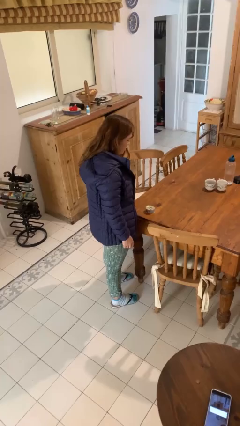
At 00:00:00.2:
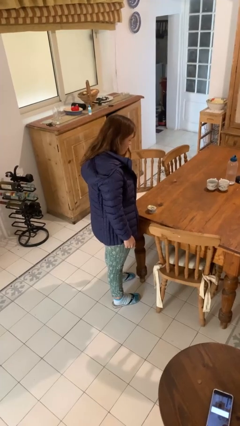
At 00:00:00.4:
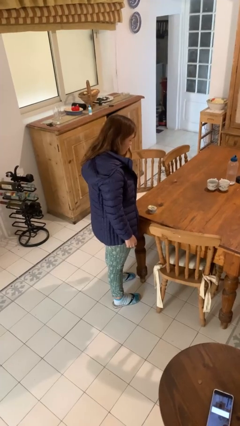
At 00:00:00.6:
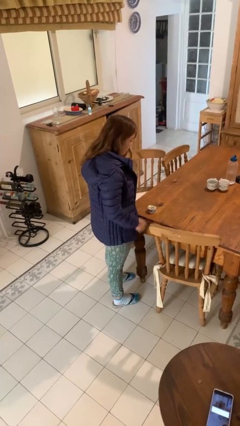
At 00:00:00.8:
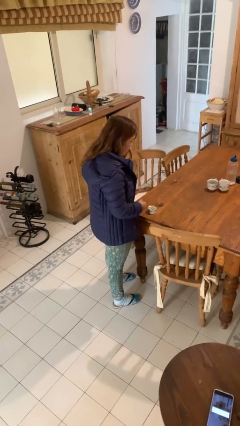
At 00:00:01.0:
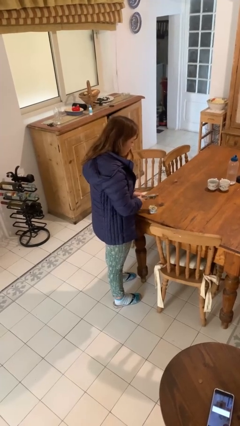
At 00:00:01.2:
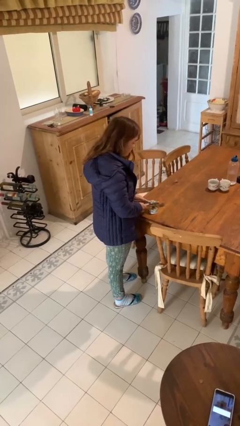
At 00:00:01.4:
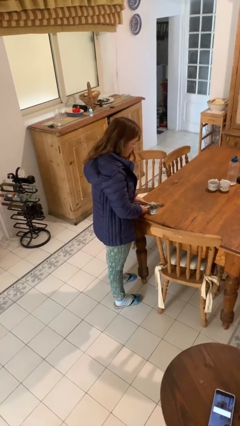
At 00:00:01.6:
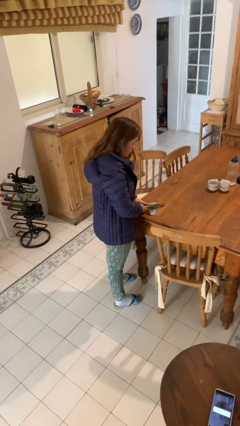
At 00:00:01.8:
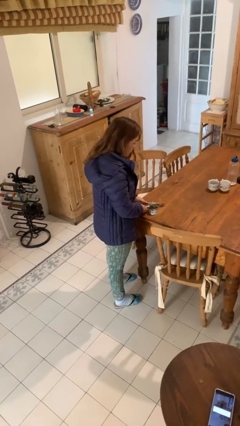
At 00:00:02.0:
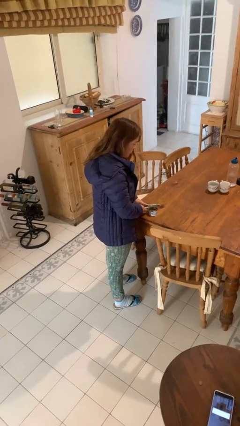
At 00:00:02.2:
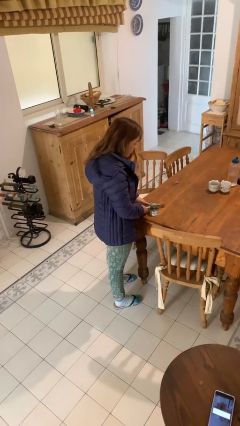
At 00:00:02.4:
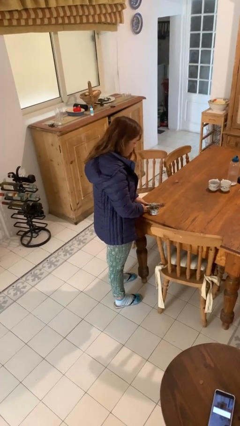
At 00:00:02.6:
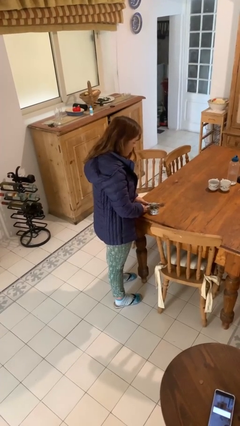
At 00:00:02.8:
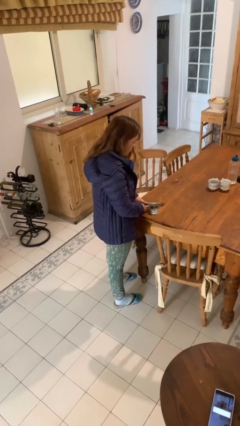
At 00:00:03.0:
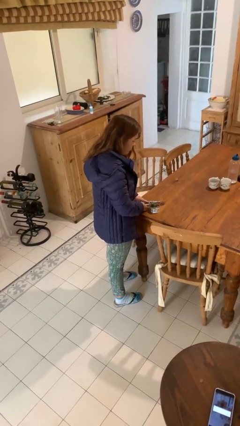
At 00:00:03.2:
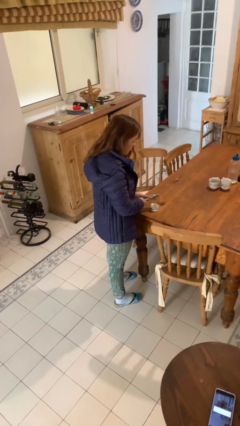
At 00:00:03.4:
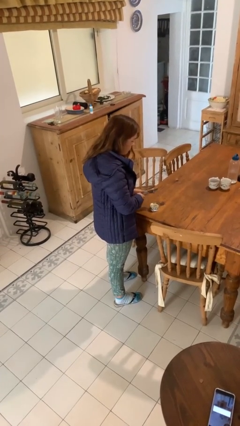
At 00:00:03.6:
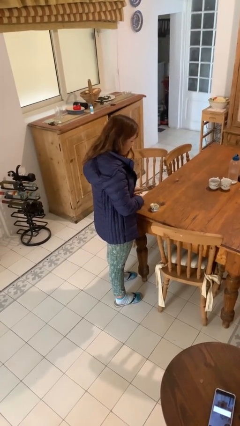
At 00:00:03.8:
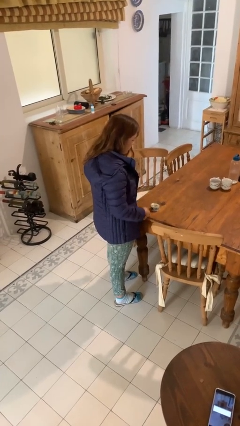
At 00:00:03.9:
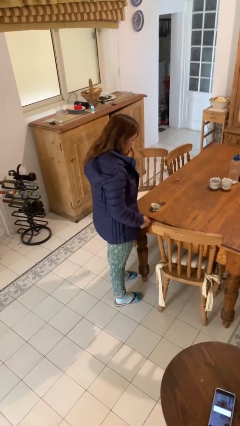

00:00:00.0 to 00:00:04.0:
person opens can with can opener

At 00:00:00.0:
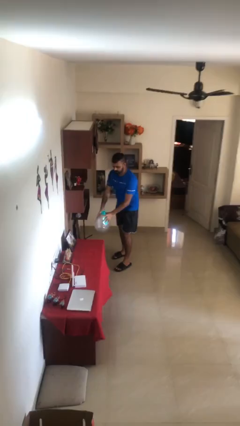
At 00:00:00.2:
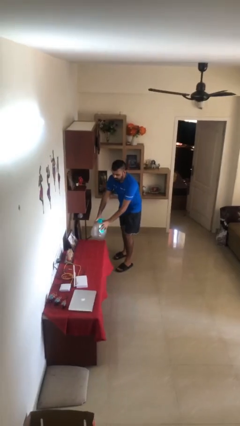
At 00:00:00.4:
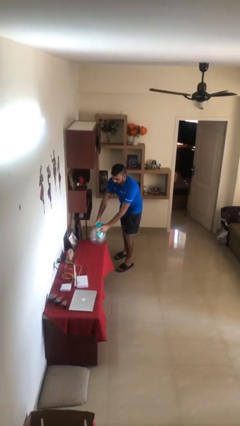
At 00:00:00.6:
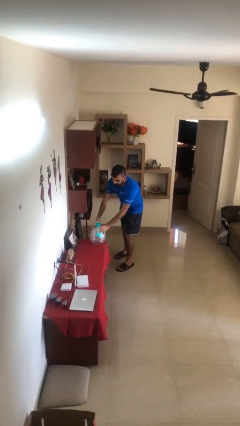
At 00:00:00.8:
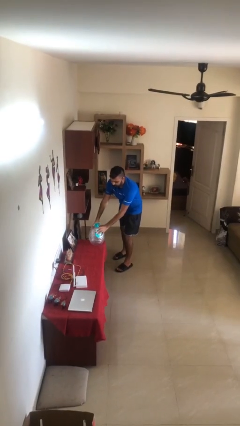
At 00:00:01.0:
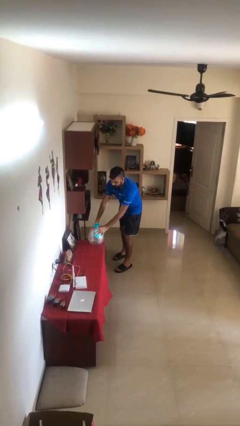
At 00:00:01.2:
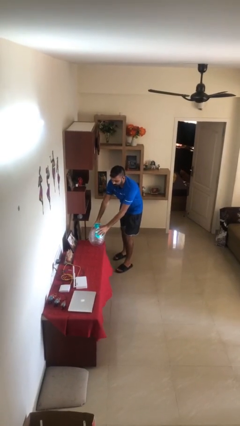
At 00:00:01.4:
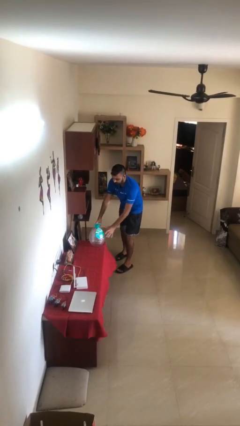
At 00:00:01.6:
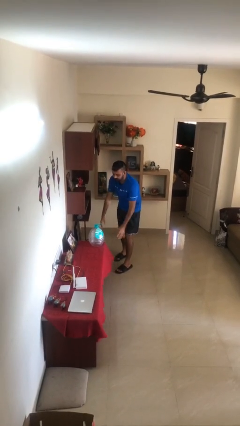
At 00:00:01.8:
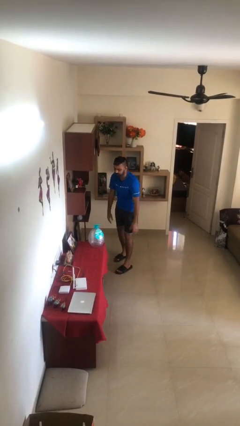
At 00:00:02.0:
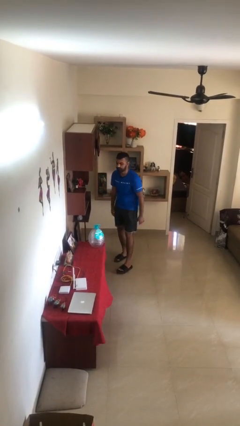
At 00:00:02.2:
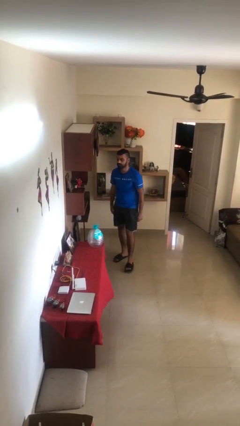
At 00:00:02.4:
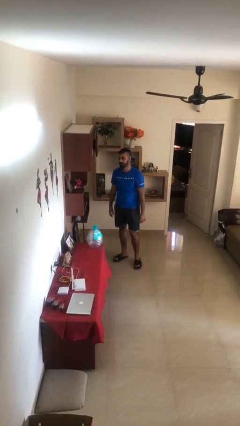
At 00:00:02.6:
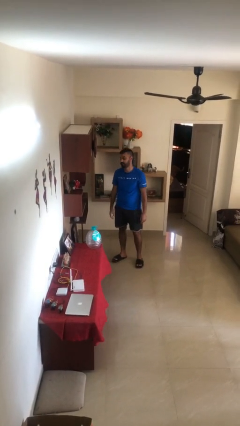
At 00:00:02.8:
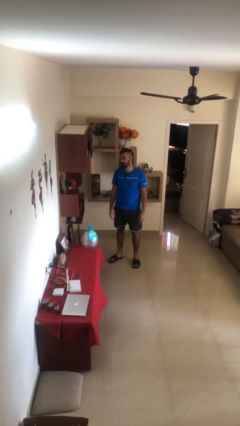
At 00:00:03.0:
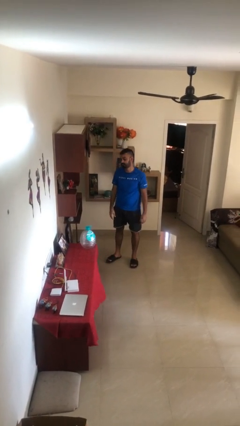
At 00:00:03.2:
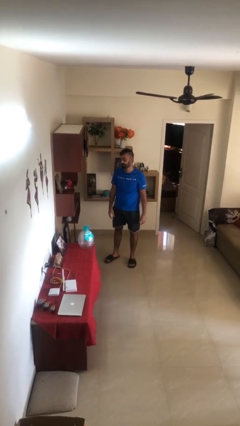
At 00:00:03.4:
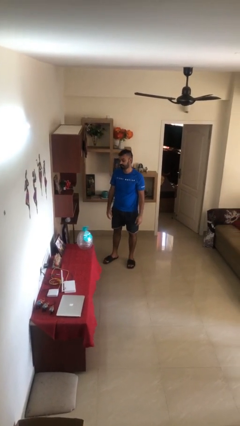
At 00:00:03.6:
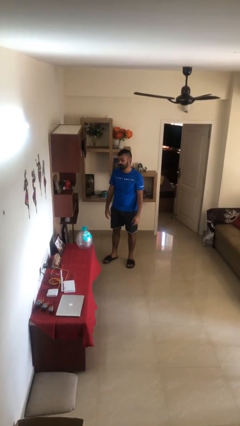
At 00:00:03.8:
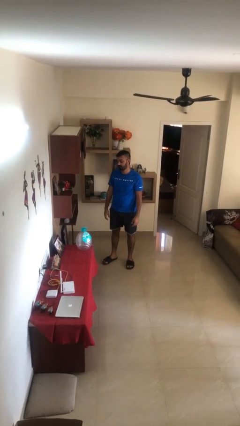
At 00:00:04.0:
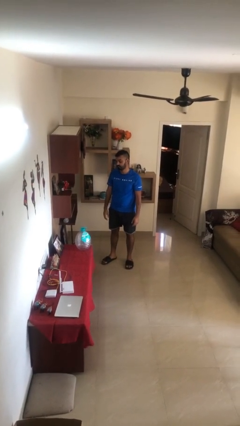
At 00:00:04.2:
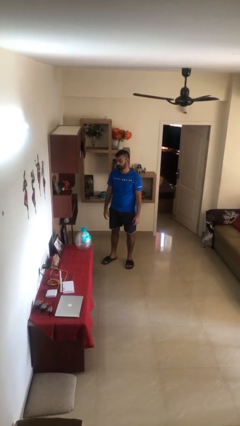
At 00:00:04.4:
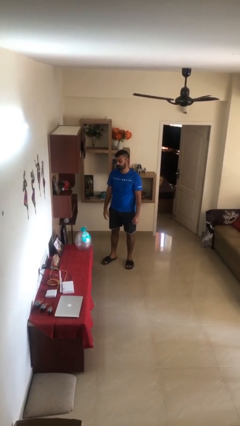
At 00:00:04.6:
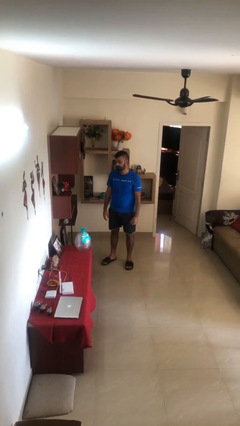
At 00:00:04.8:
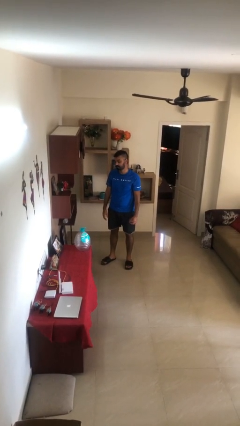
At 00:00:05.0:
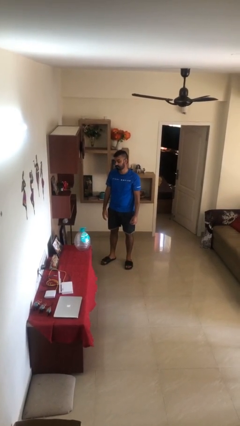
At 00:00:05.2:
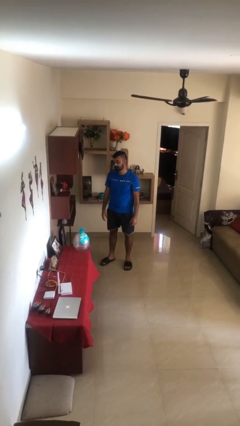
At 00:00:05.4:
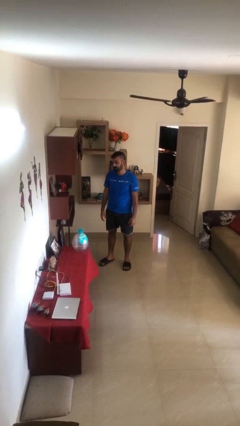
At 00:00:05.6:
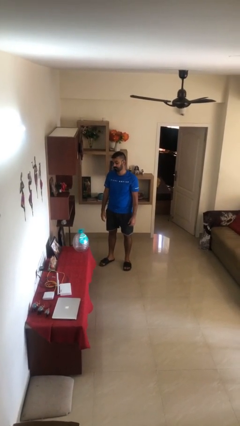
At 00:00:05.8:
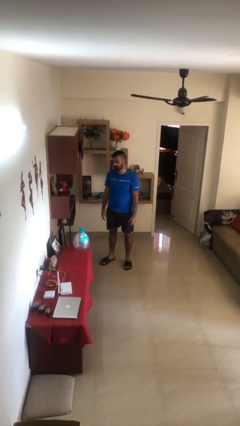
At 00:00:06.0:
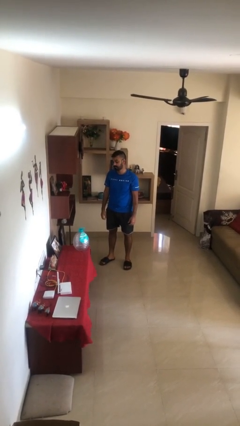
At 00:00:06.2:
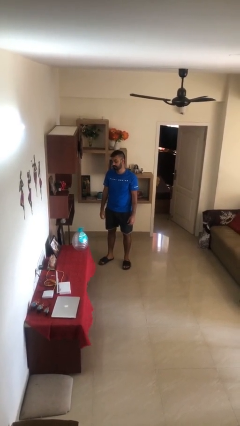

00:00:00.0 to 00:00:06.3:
person puts down object on table

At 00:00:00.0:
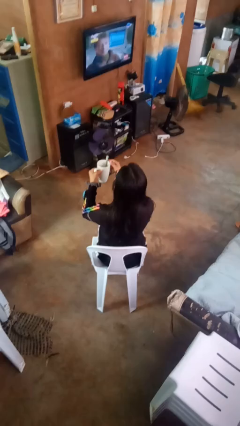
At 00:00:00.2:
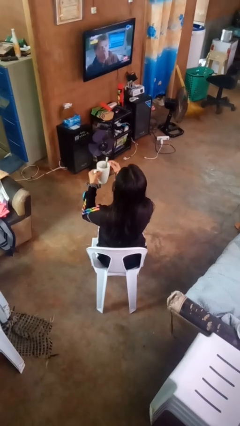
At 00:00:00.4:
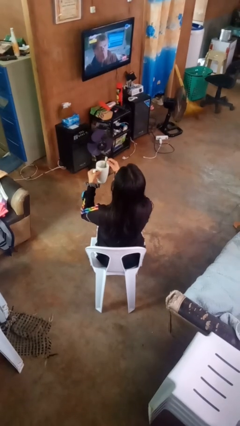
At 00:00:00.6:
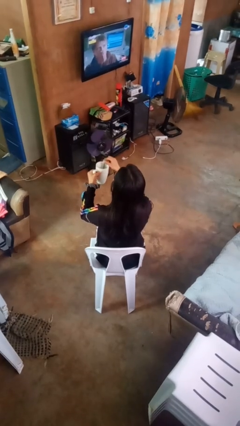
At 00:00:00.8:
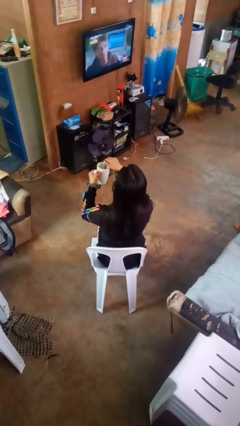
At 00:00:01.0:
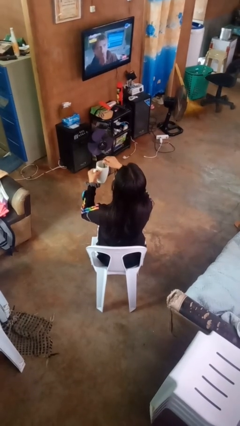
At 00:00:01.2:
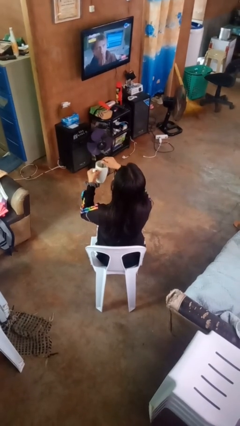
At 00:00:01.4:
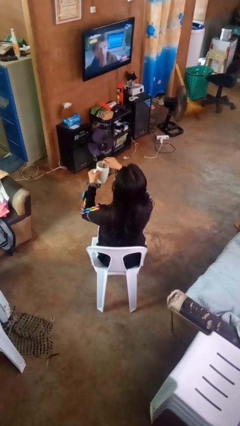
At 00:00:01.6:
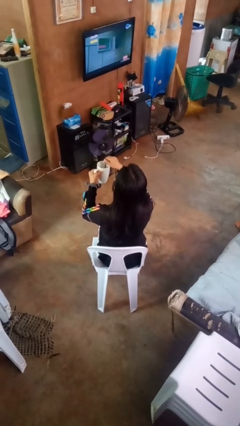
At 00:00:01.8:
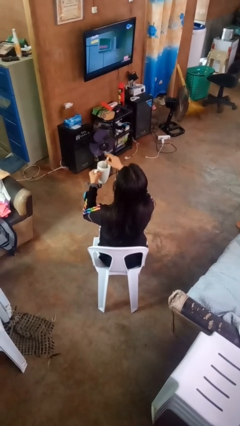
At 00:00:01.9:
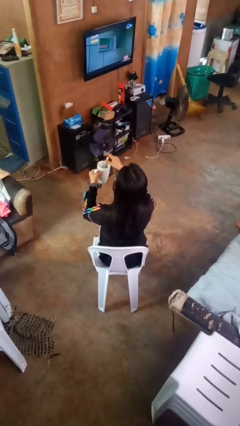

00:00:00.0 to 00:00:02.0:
person stirs mug

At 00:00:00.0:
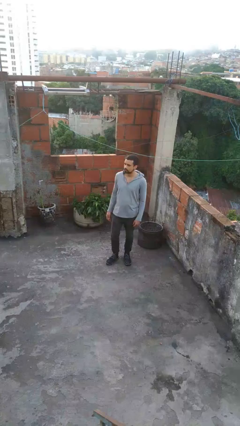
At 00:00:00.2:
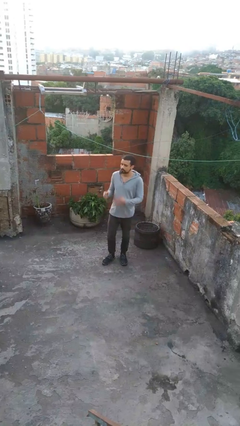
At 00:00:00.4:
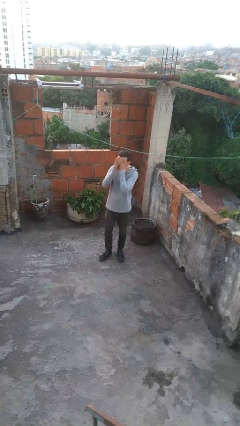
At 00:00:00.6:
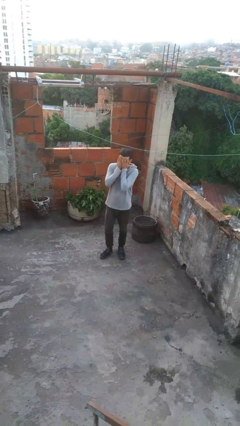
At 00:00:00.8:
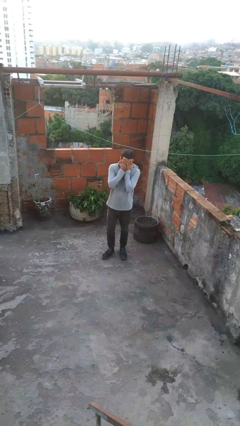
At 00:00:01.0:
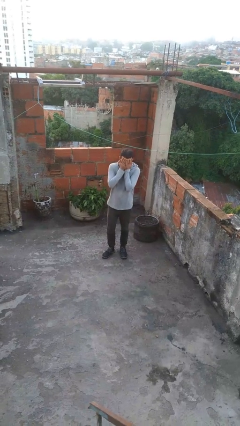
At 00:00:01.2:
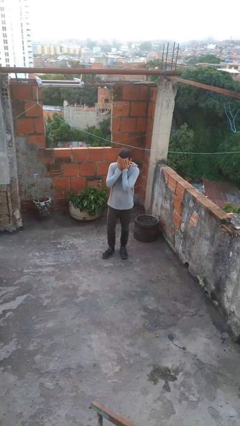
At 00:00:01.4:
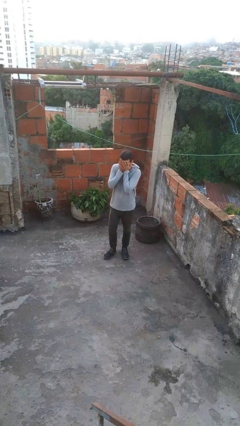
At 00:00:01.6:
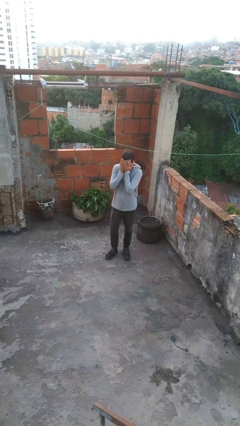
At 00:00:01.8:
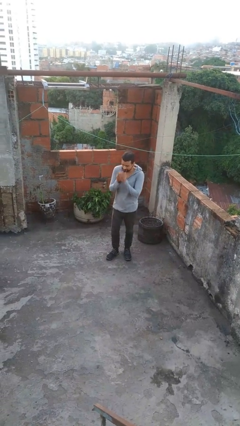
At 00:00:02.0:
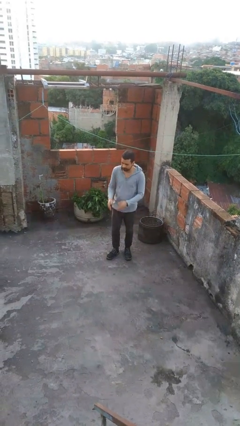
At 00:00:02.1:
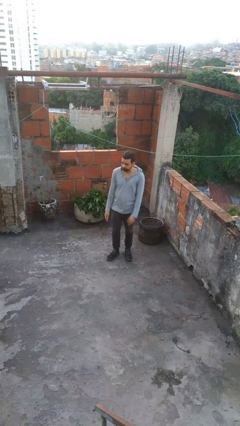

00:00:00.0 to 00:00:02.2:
person covers face with hands

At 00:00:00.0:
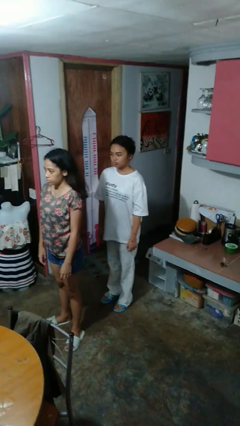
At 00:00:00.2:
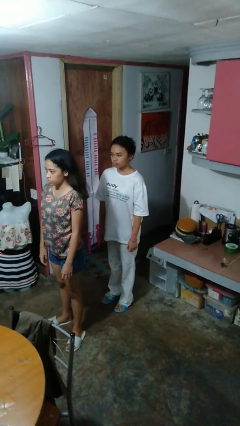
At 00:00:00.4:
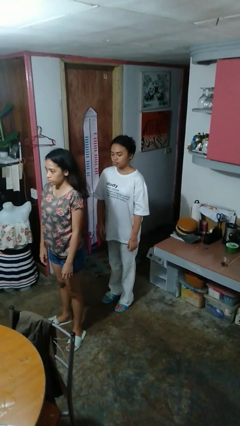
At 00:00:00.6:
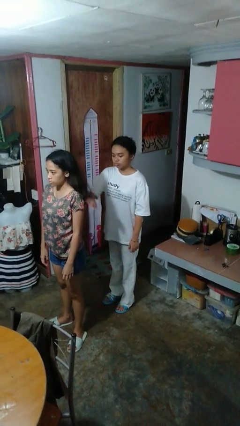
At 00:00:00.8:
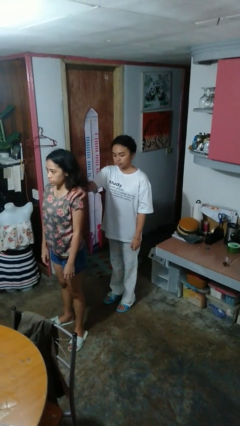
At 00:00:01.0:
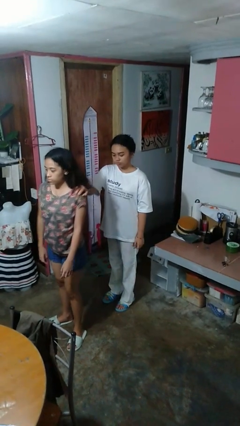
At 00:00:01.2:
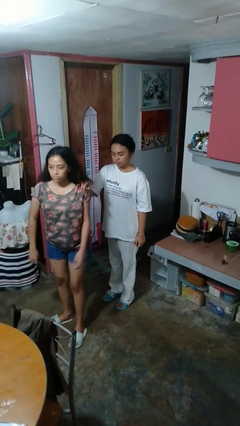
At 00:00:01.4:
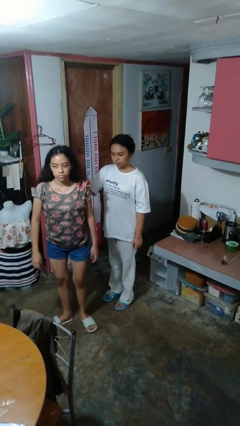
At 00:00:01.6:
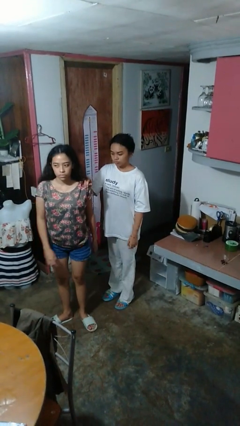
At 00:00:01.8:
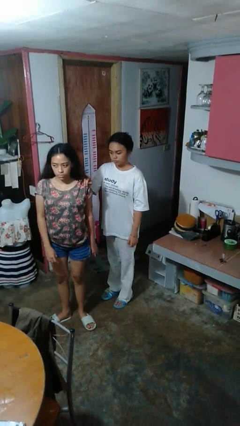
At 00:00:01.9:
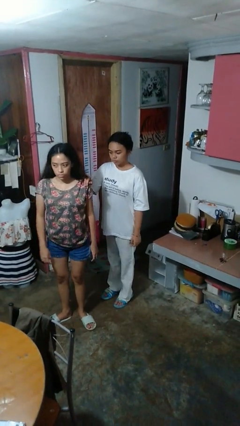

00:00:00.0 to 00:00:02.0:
person grabs person by shoulder

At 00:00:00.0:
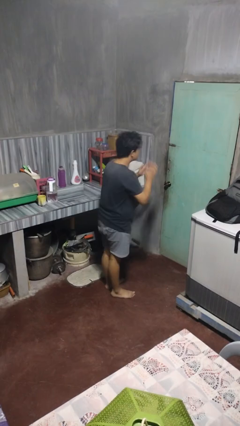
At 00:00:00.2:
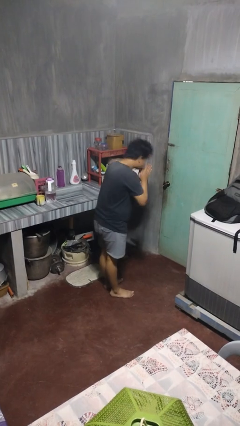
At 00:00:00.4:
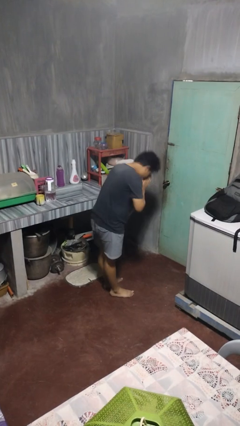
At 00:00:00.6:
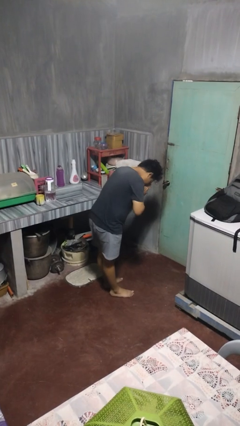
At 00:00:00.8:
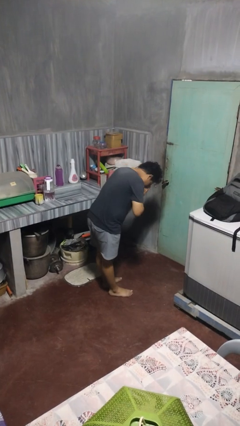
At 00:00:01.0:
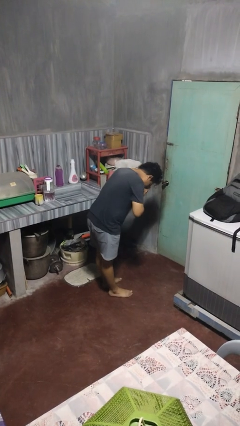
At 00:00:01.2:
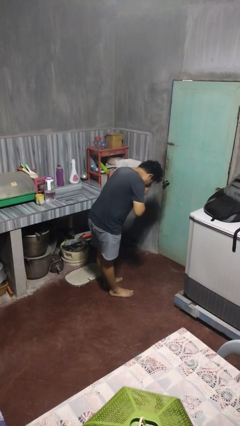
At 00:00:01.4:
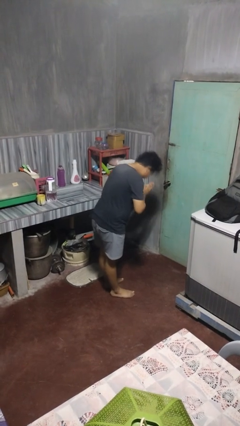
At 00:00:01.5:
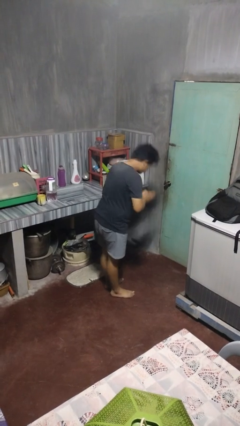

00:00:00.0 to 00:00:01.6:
person prays
